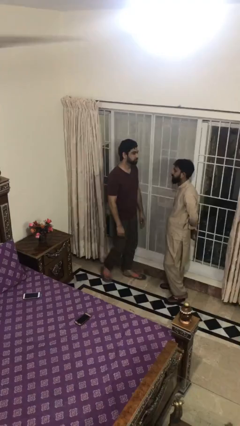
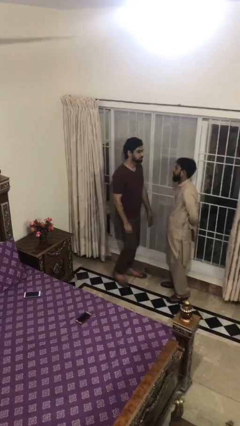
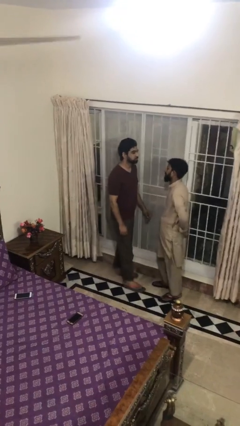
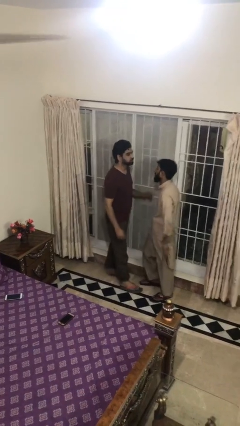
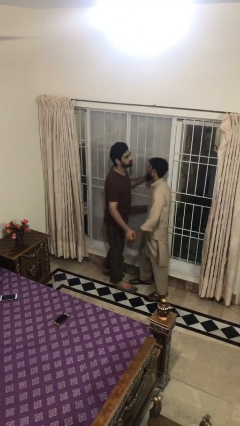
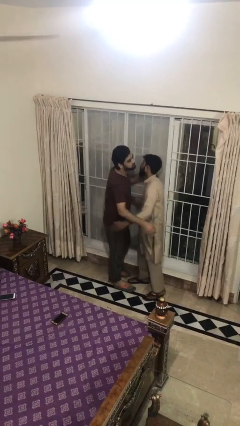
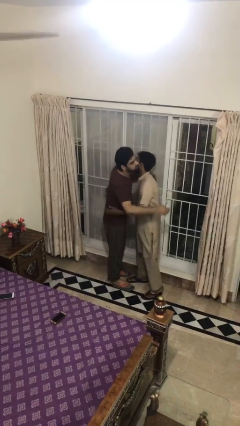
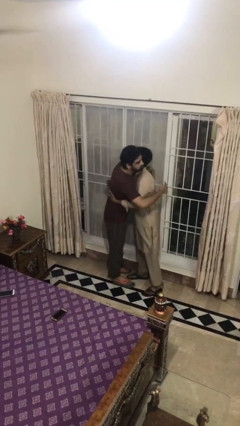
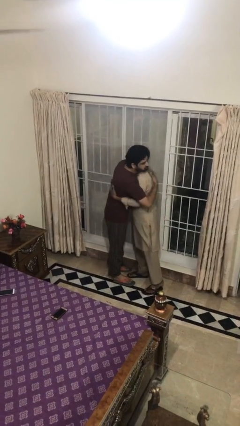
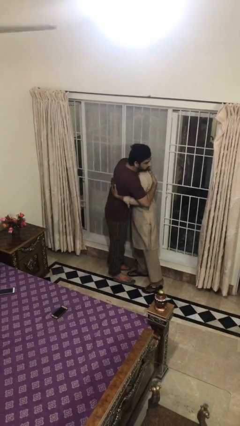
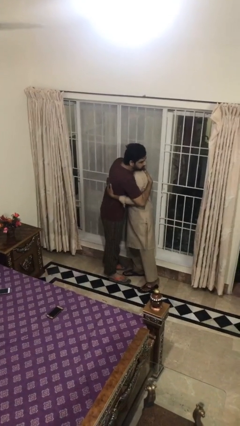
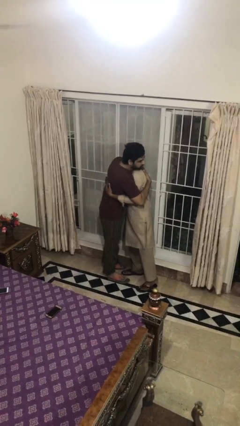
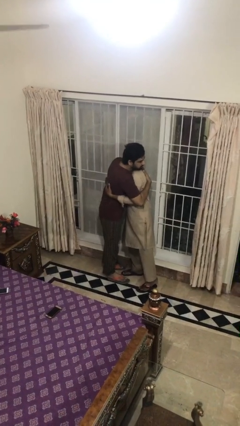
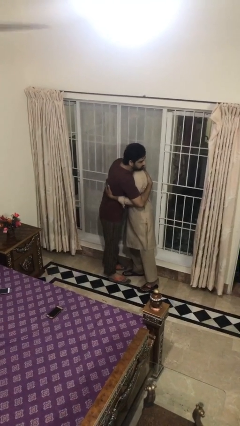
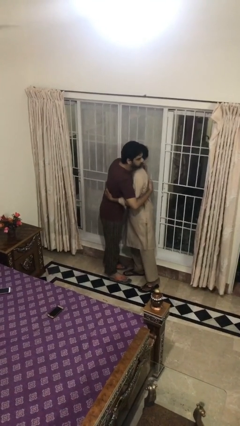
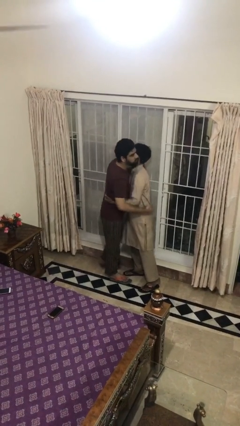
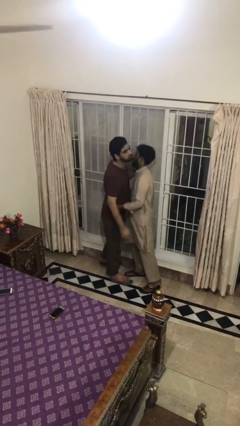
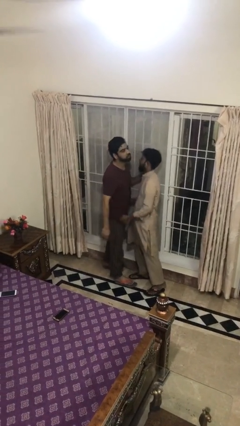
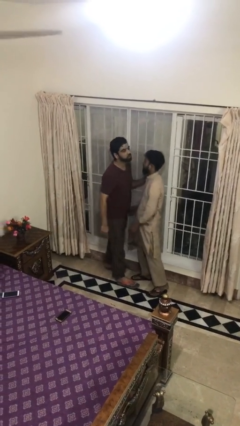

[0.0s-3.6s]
person embraces person

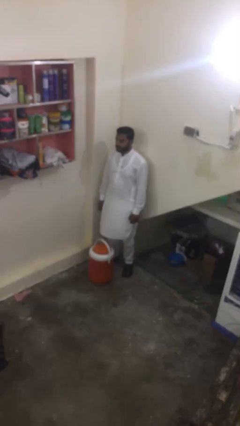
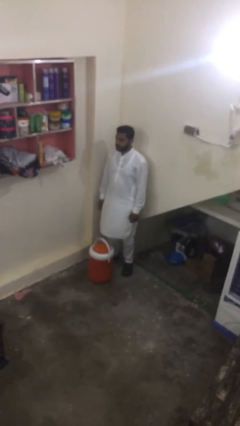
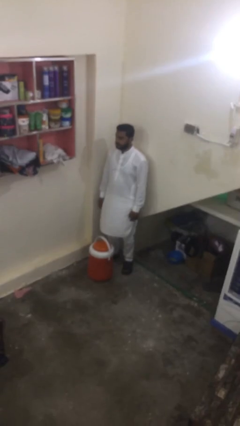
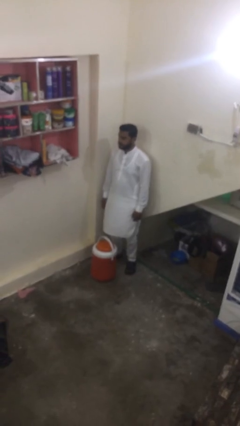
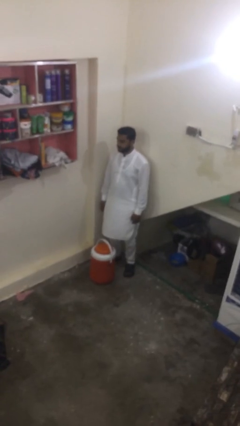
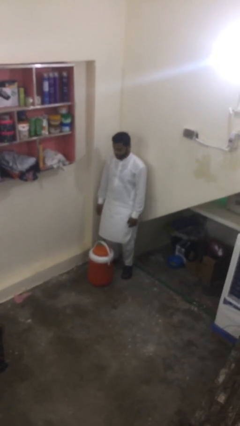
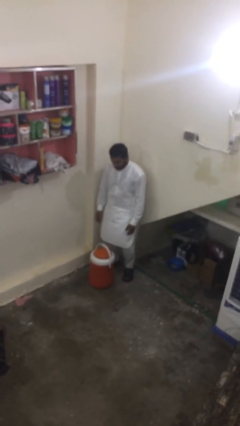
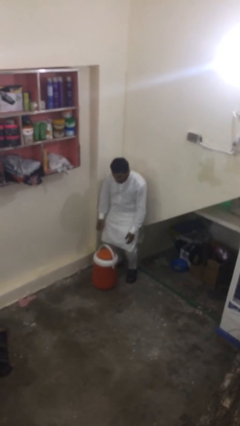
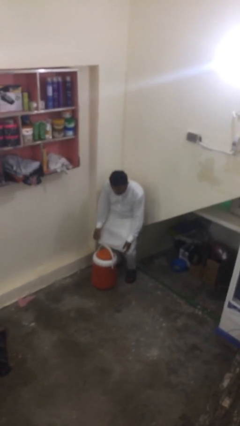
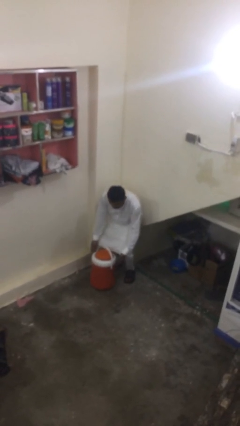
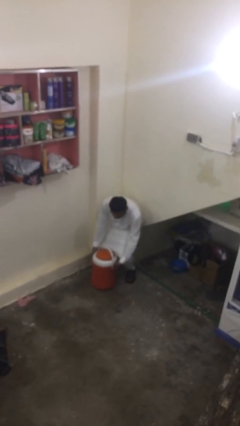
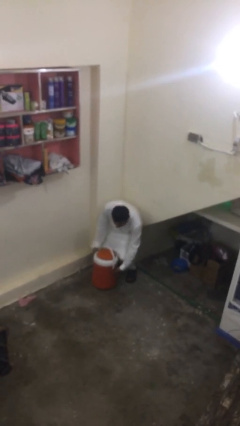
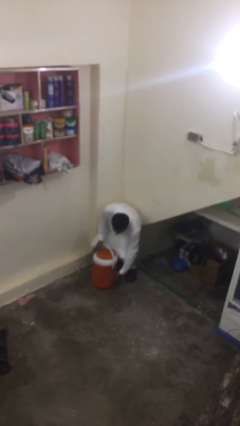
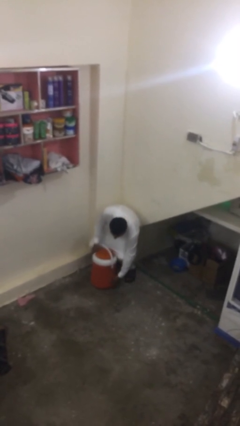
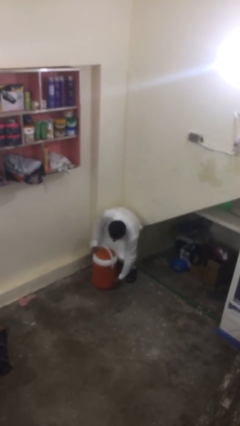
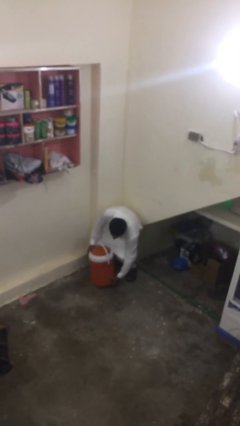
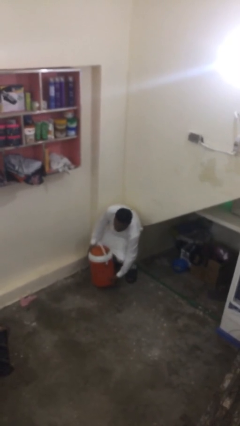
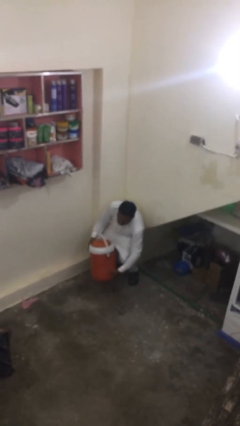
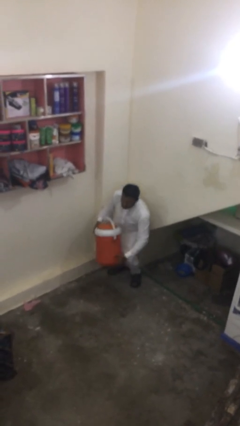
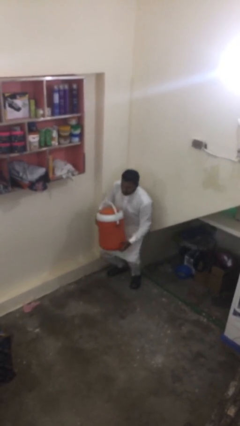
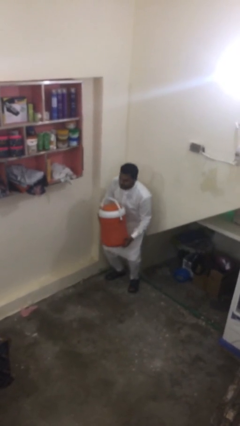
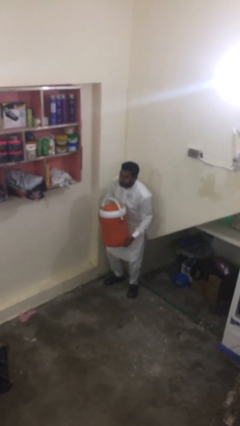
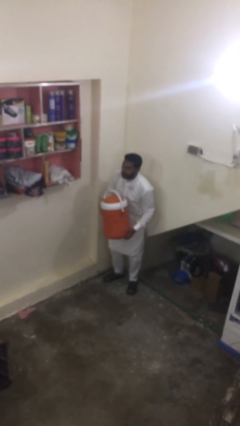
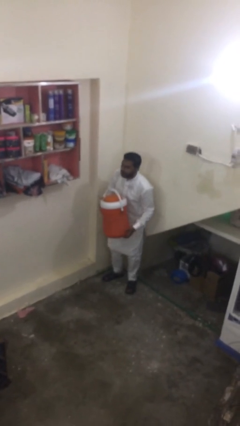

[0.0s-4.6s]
person picks up object from floor

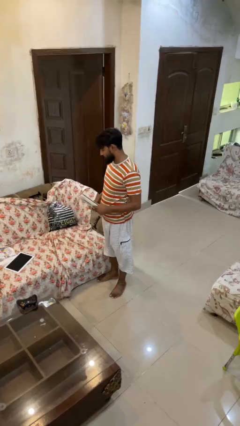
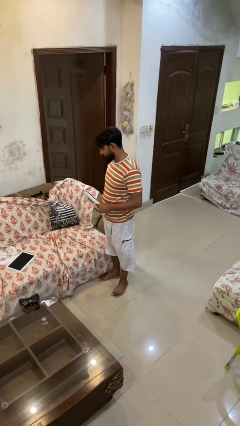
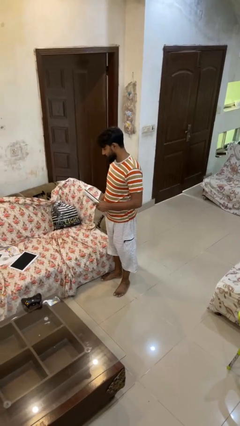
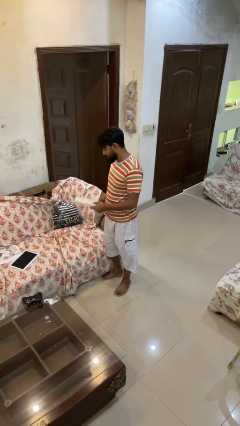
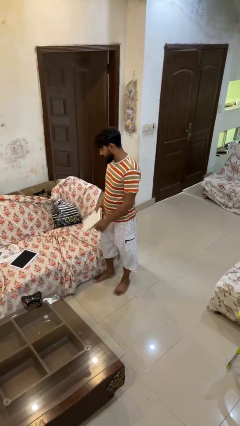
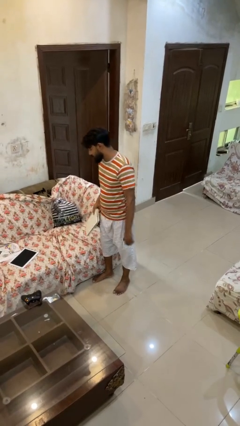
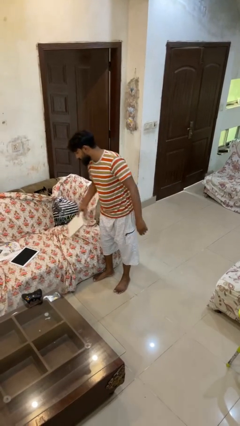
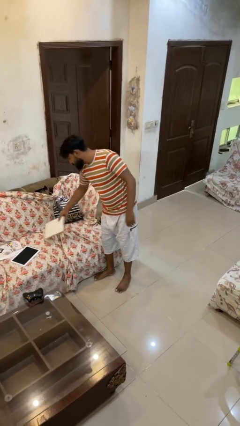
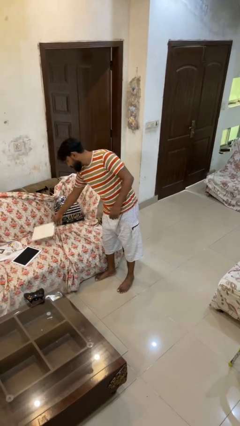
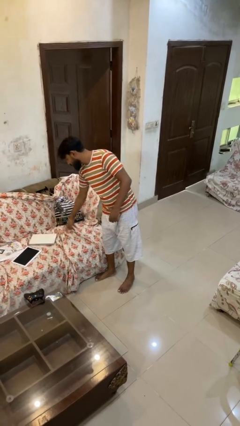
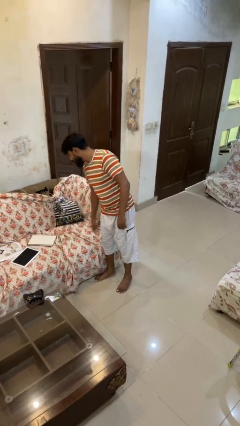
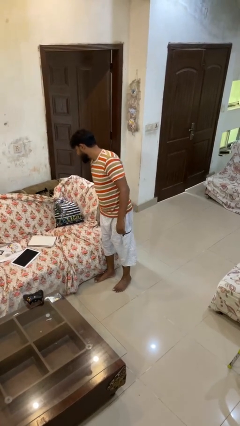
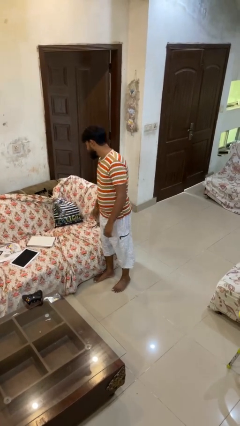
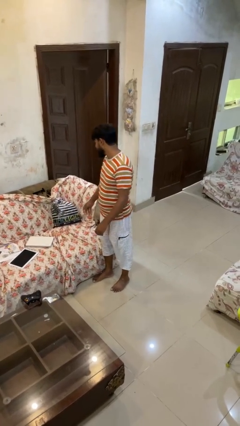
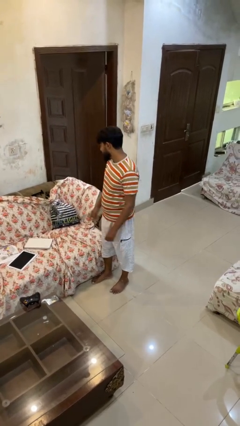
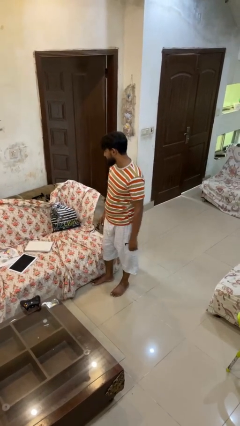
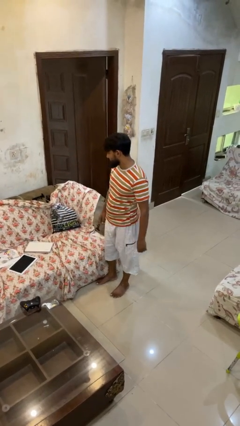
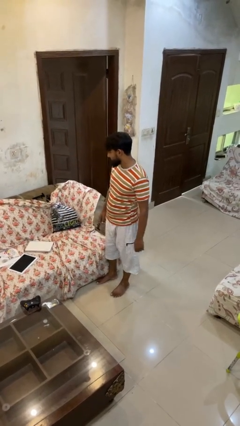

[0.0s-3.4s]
person puts down object on couch

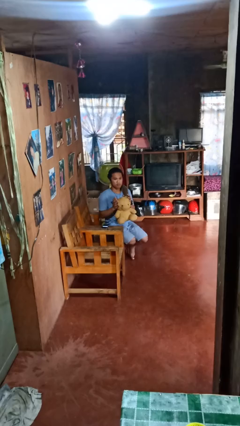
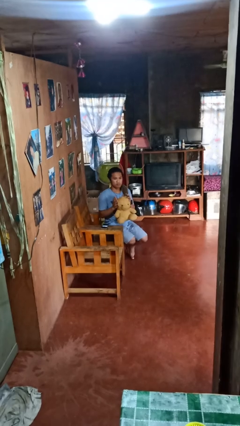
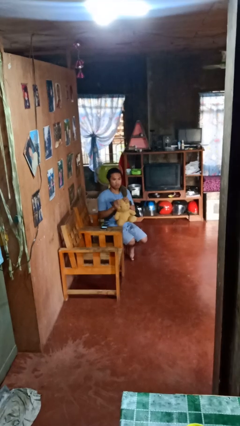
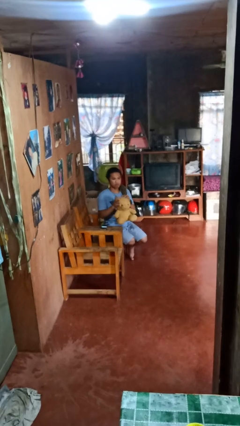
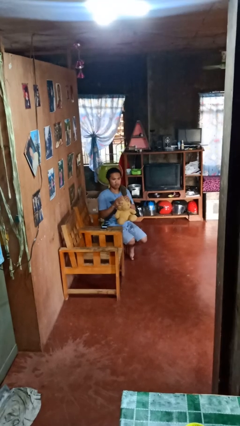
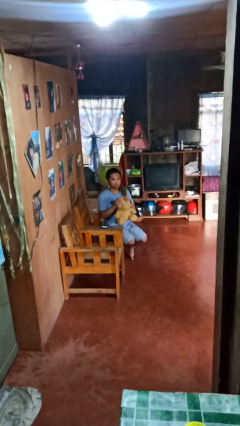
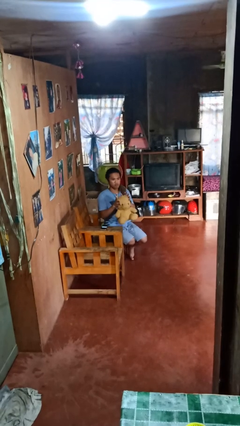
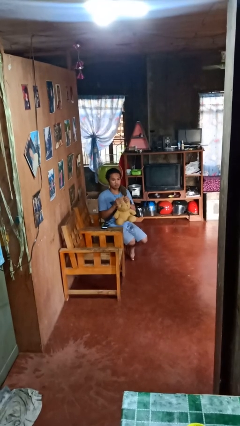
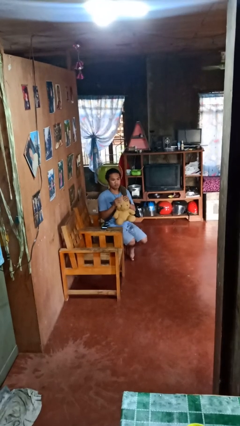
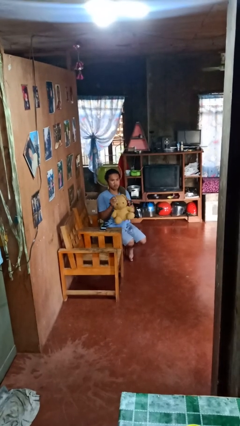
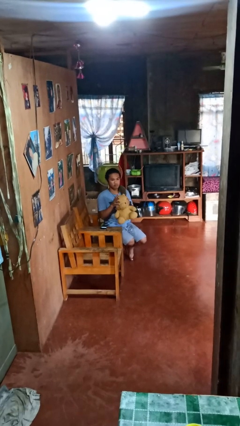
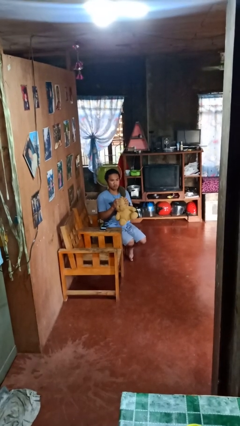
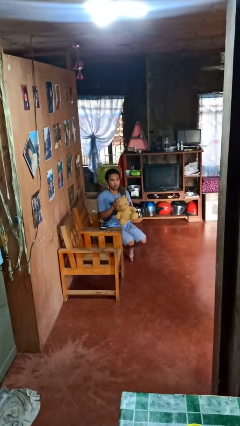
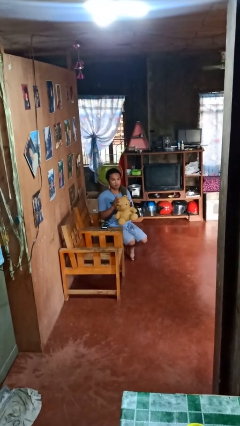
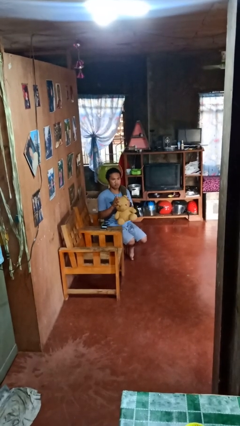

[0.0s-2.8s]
person squeezes object

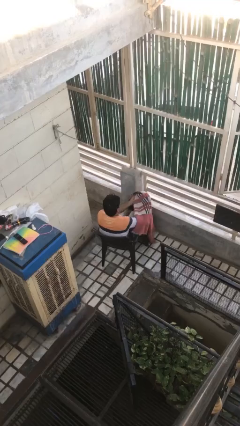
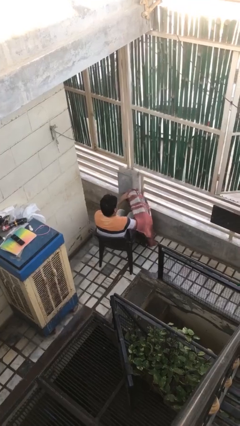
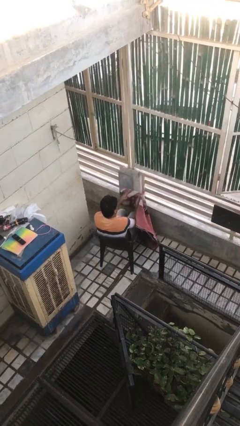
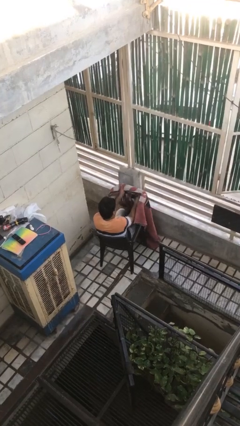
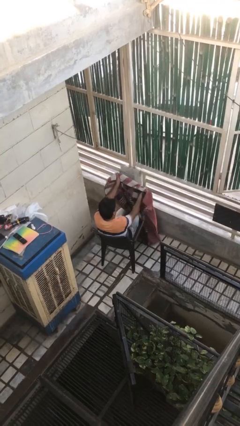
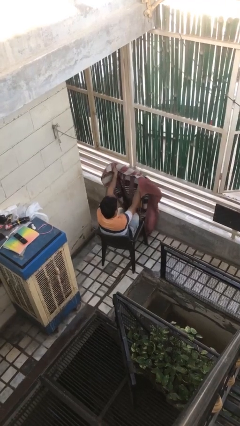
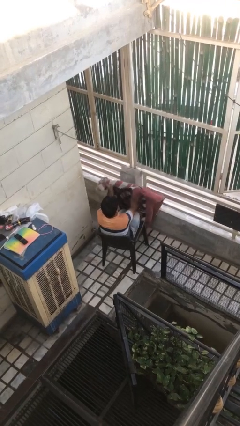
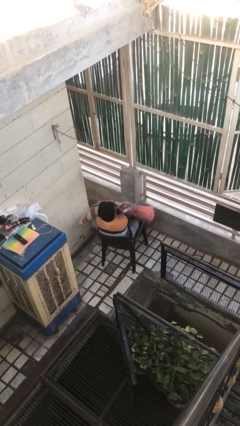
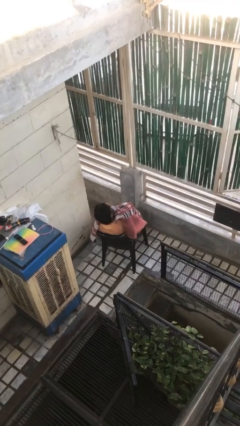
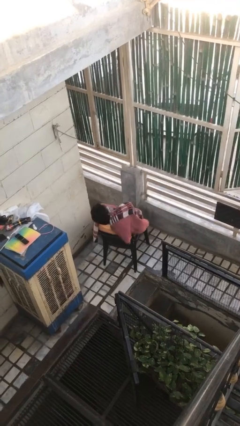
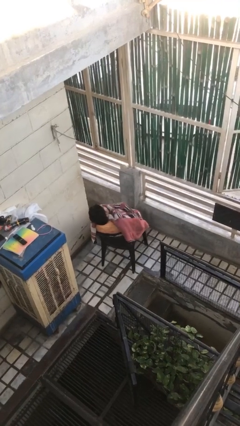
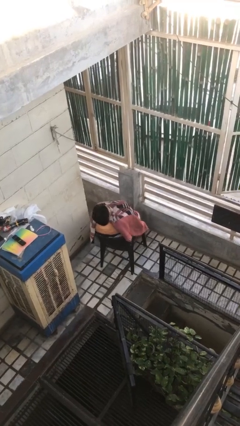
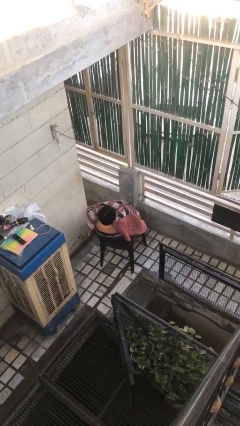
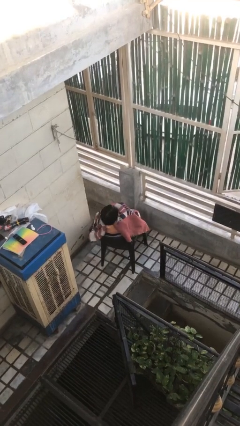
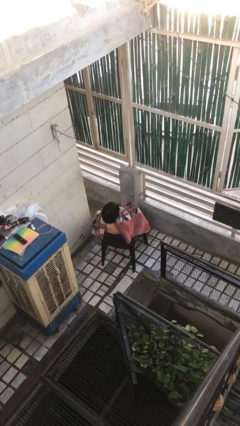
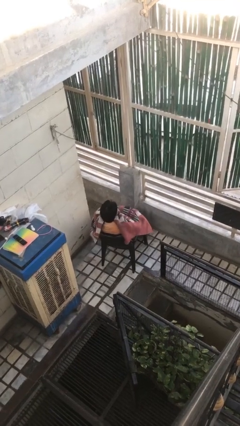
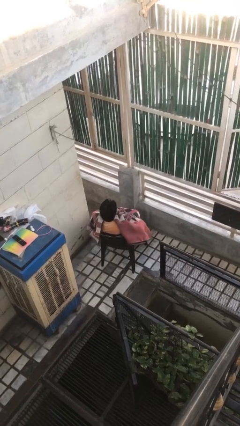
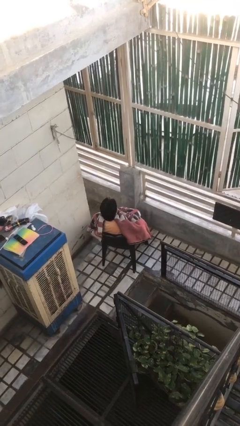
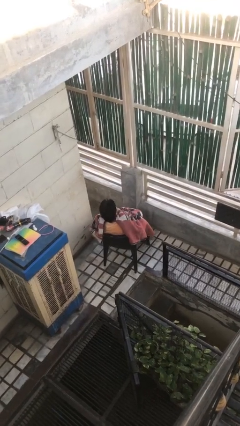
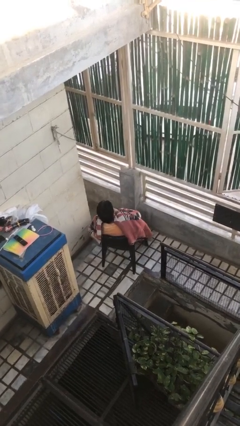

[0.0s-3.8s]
person covers with blanket
